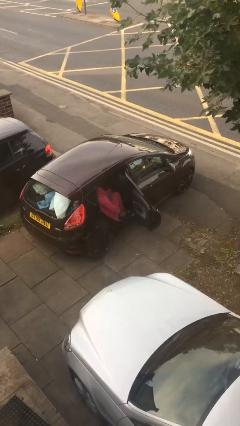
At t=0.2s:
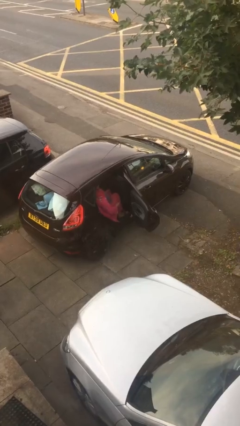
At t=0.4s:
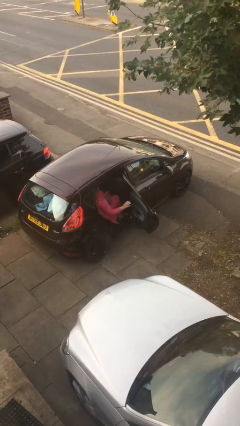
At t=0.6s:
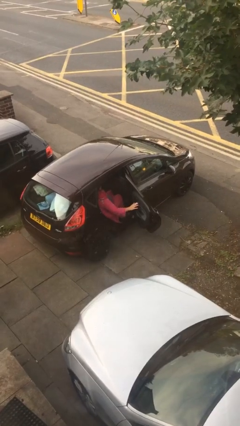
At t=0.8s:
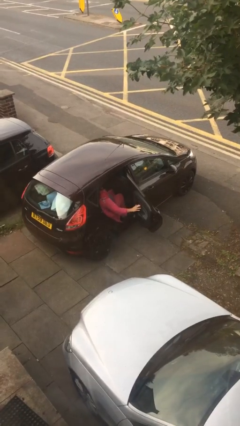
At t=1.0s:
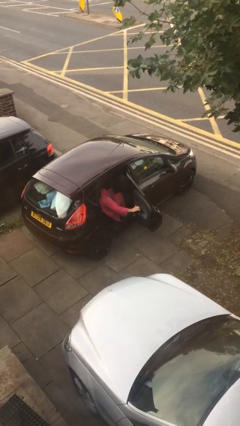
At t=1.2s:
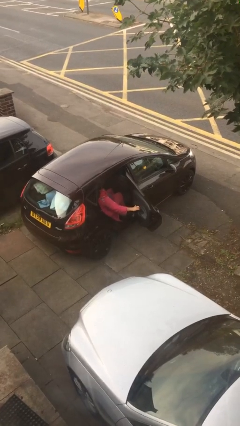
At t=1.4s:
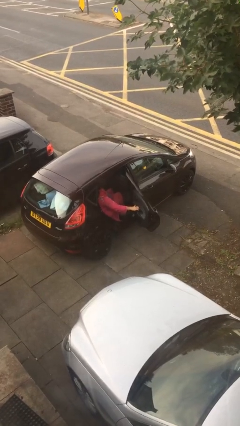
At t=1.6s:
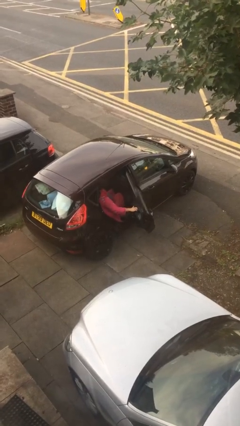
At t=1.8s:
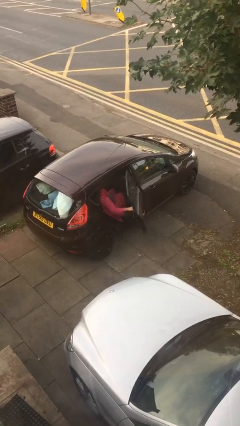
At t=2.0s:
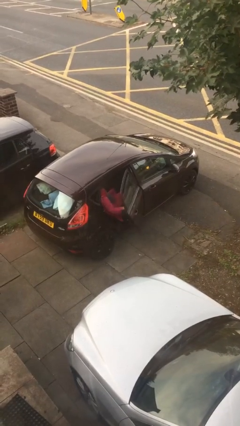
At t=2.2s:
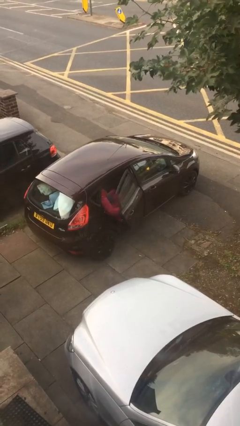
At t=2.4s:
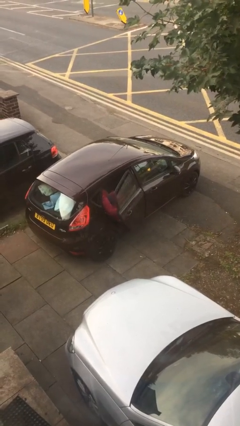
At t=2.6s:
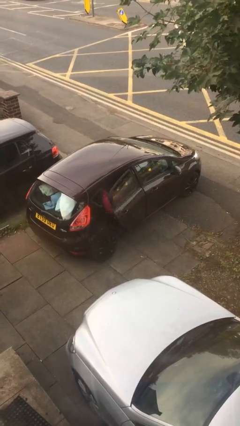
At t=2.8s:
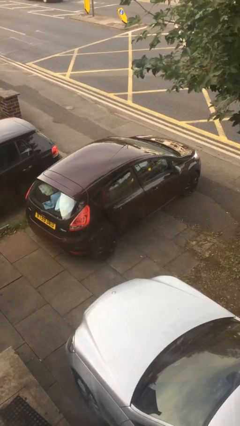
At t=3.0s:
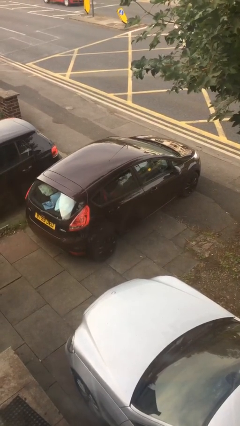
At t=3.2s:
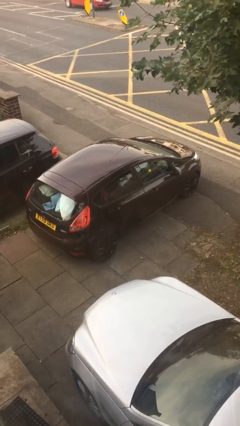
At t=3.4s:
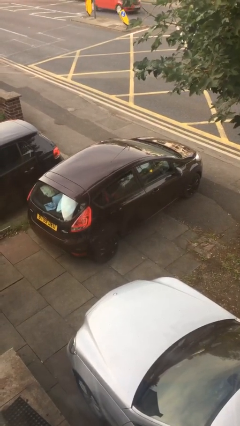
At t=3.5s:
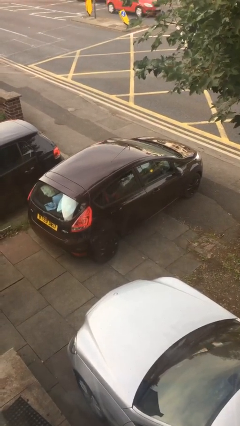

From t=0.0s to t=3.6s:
person closes car door

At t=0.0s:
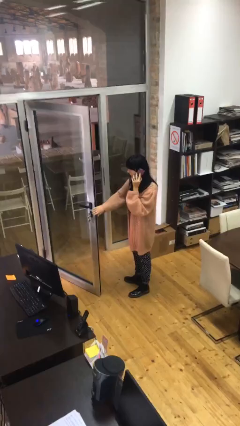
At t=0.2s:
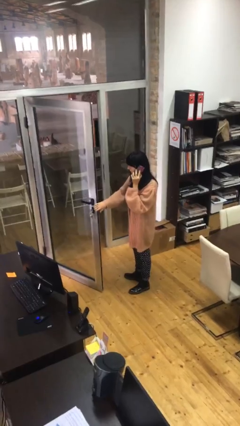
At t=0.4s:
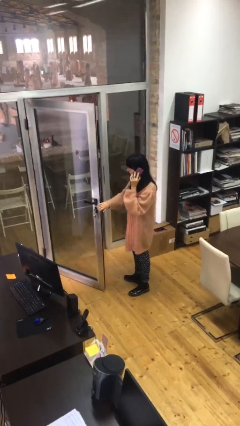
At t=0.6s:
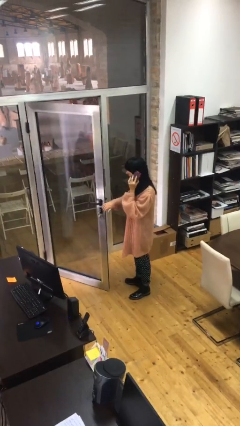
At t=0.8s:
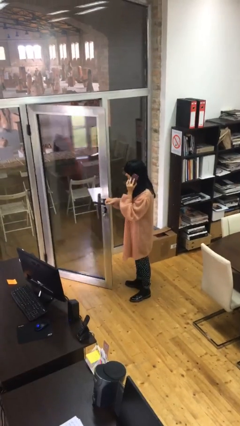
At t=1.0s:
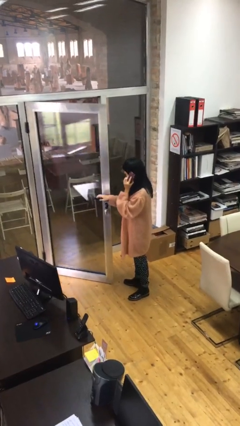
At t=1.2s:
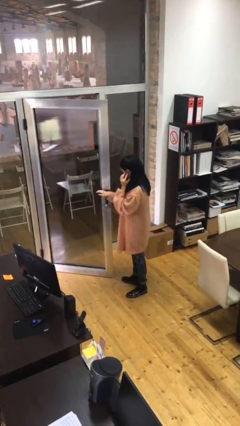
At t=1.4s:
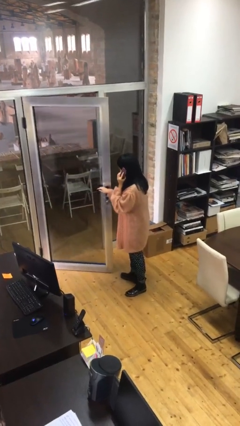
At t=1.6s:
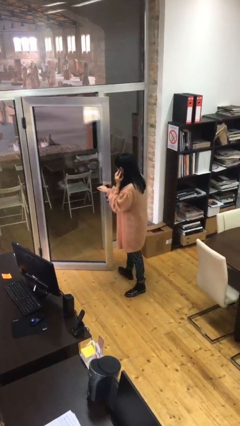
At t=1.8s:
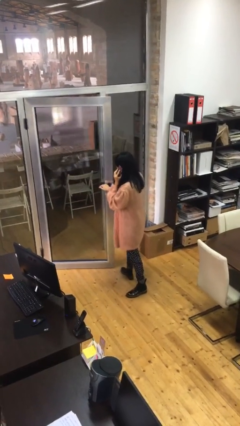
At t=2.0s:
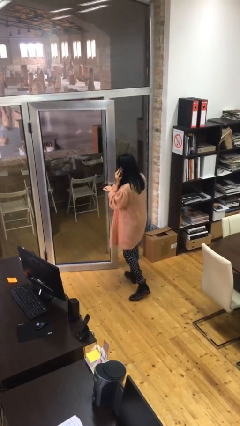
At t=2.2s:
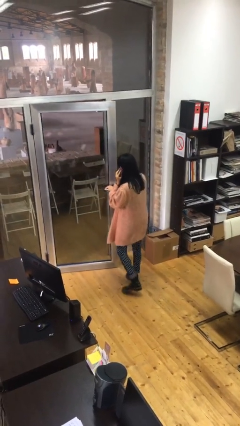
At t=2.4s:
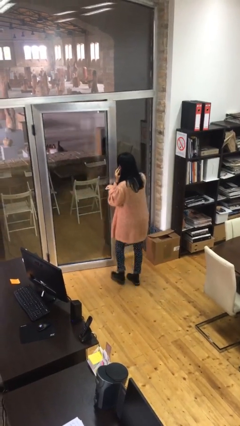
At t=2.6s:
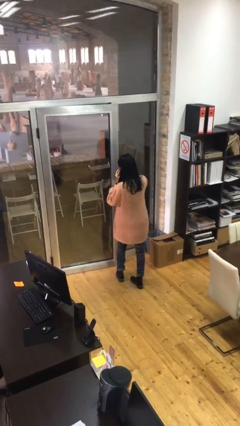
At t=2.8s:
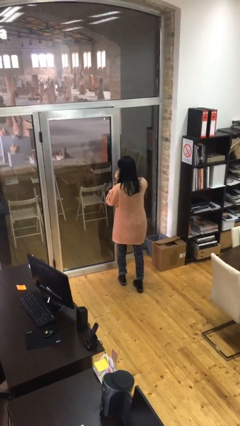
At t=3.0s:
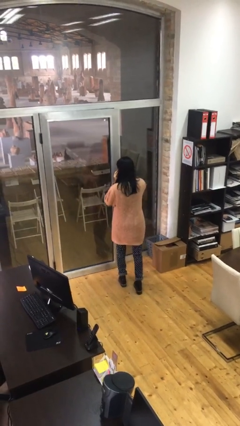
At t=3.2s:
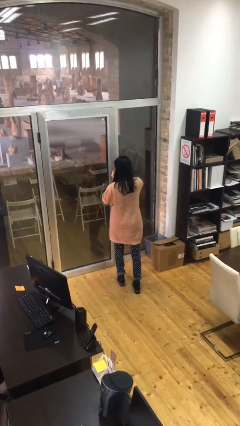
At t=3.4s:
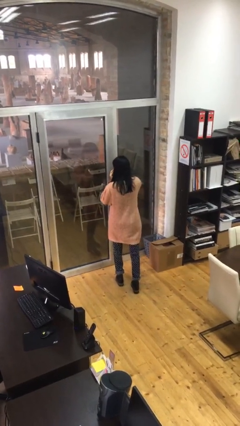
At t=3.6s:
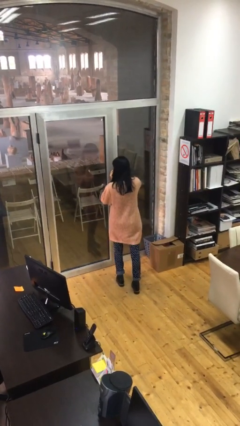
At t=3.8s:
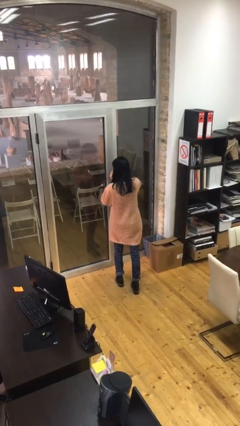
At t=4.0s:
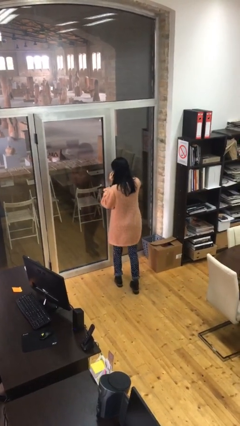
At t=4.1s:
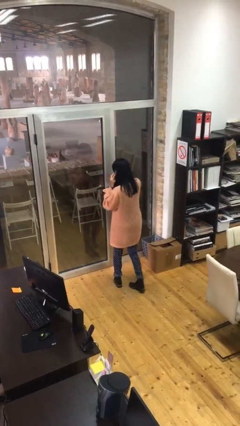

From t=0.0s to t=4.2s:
person closes facility door

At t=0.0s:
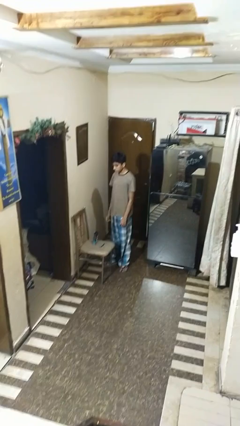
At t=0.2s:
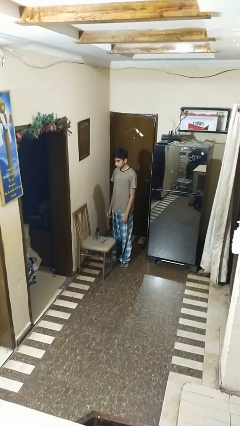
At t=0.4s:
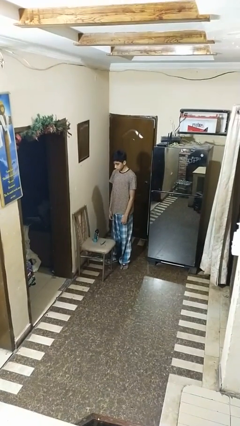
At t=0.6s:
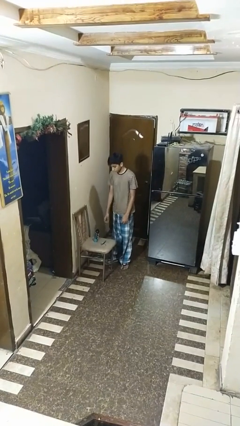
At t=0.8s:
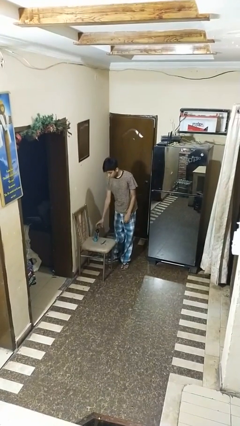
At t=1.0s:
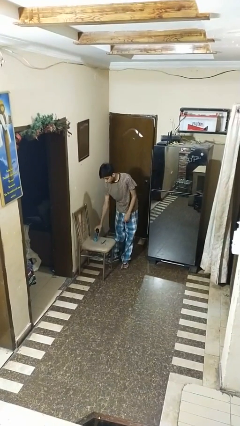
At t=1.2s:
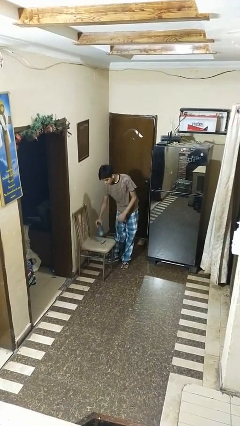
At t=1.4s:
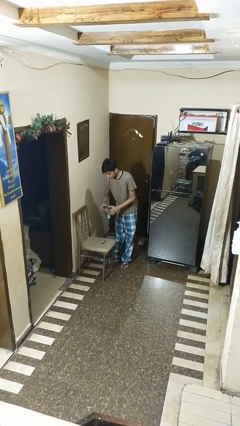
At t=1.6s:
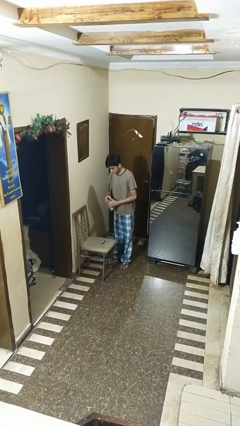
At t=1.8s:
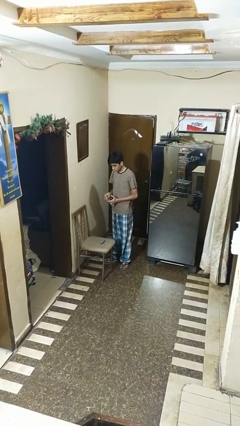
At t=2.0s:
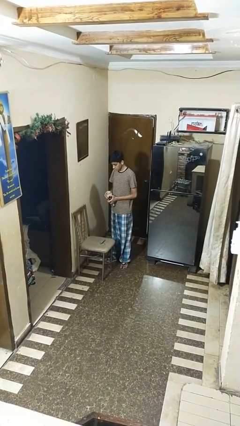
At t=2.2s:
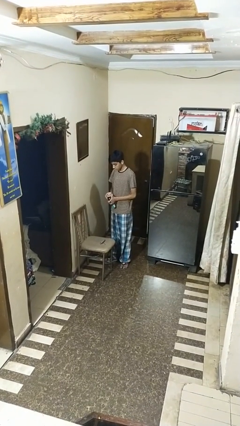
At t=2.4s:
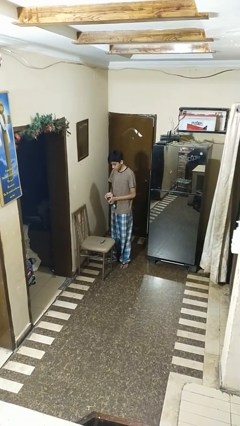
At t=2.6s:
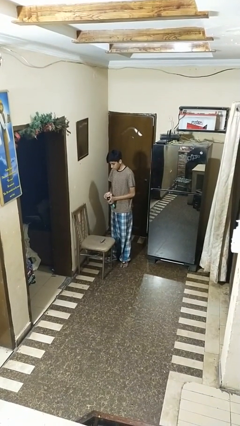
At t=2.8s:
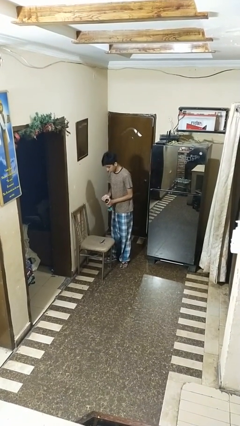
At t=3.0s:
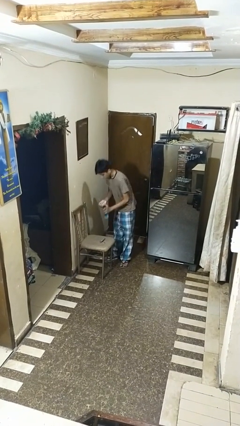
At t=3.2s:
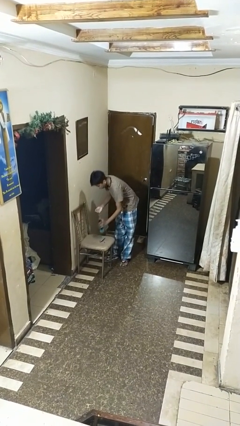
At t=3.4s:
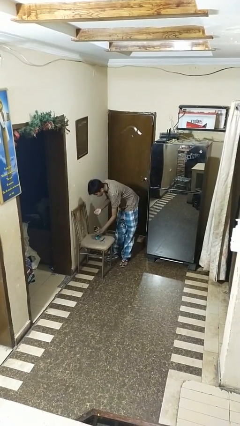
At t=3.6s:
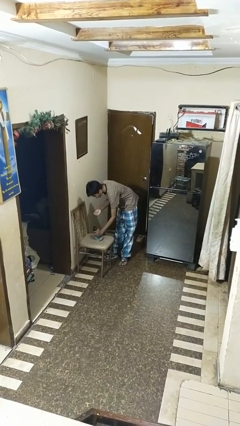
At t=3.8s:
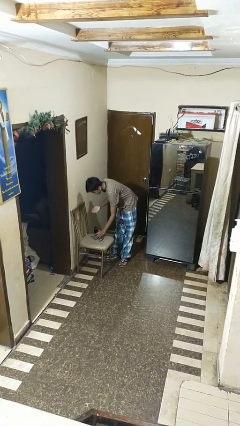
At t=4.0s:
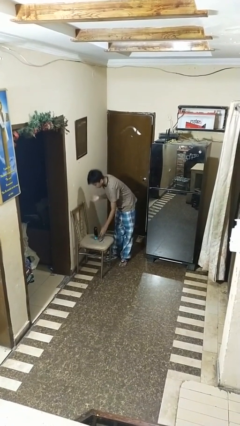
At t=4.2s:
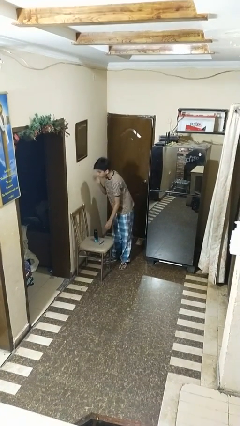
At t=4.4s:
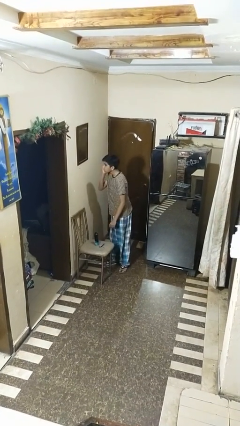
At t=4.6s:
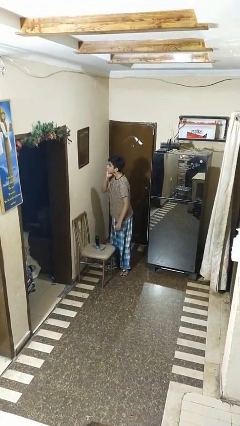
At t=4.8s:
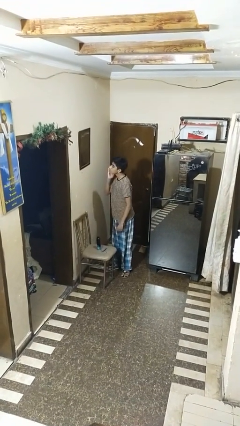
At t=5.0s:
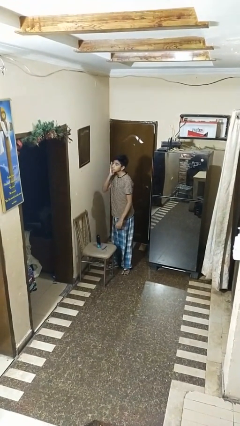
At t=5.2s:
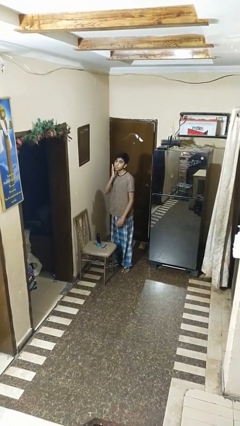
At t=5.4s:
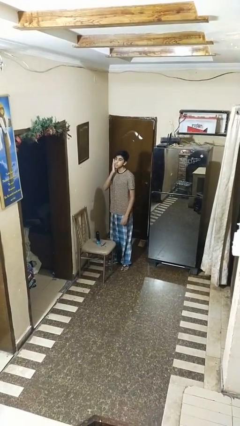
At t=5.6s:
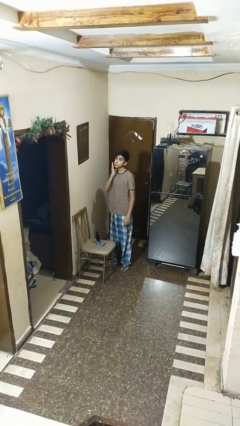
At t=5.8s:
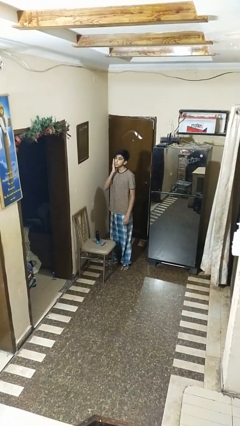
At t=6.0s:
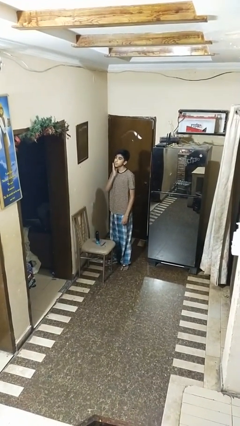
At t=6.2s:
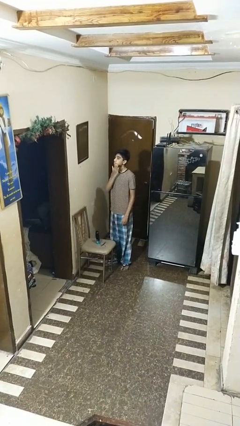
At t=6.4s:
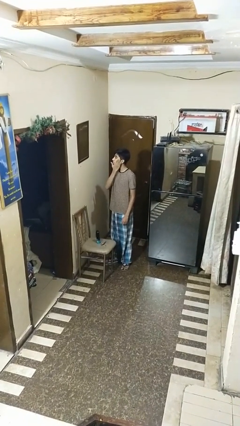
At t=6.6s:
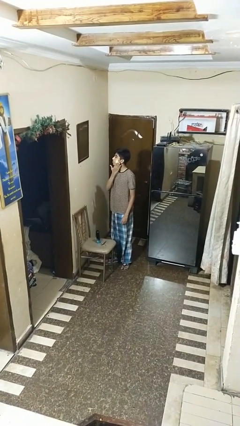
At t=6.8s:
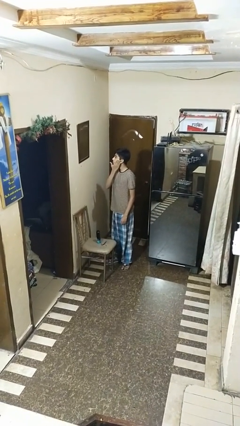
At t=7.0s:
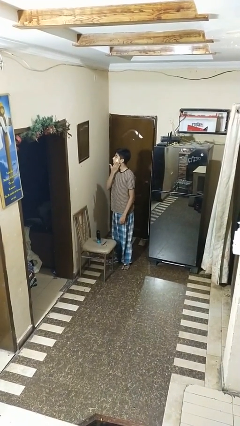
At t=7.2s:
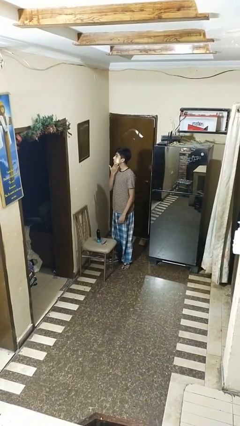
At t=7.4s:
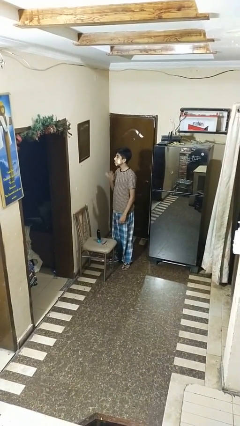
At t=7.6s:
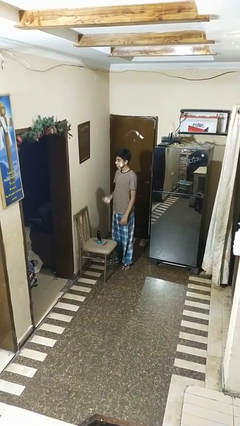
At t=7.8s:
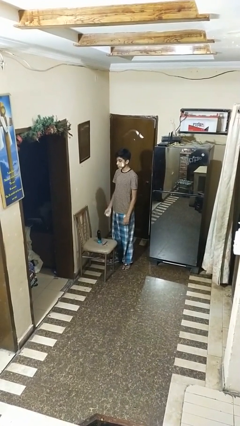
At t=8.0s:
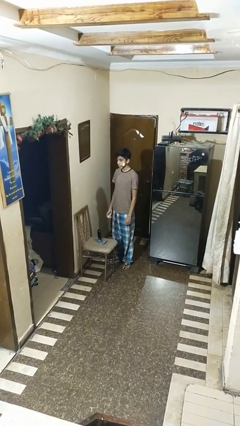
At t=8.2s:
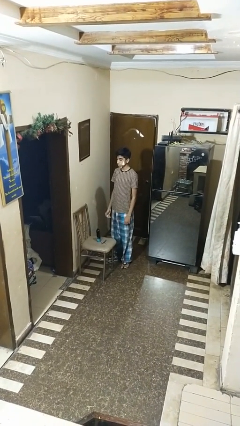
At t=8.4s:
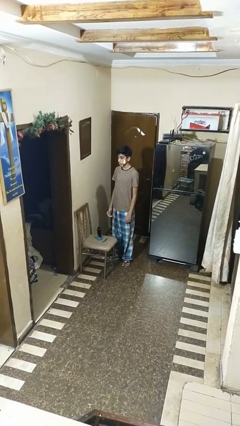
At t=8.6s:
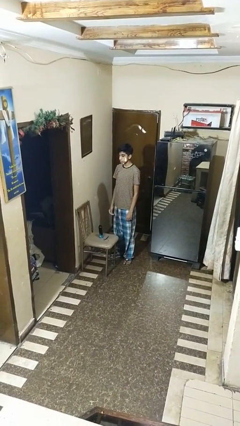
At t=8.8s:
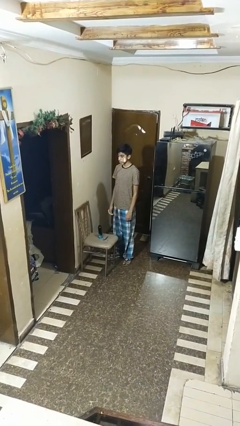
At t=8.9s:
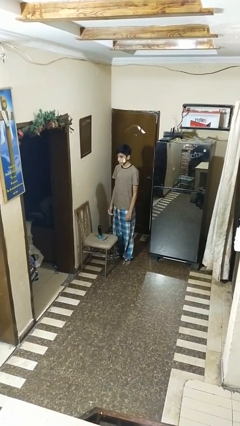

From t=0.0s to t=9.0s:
person applies shaving cream

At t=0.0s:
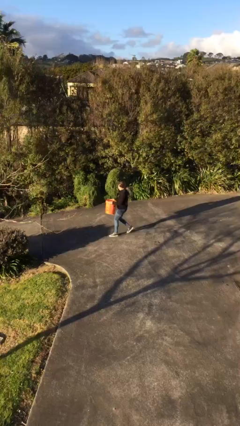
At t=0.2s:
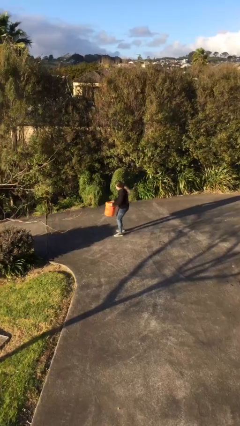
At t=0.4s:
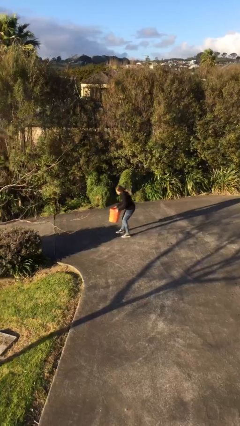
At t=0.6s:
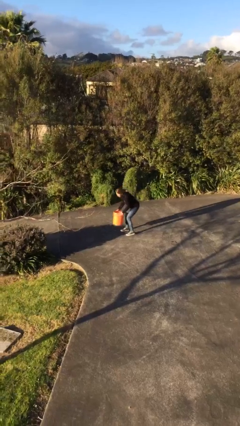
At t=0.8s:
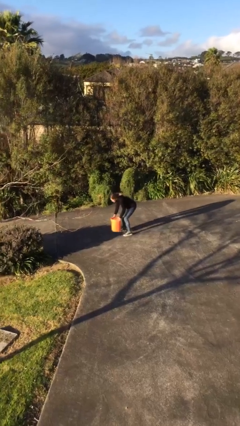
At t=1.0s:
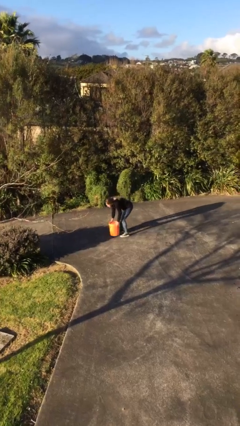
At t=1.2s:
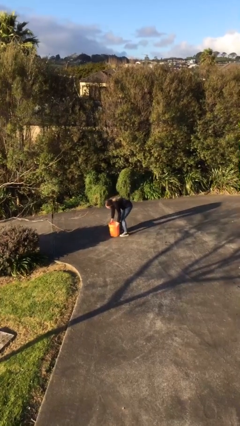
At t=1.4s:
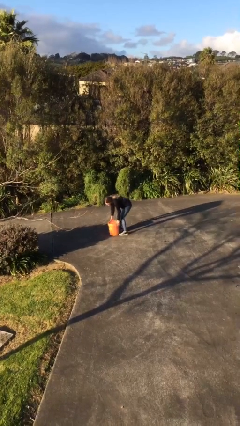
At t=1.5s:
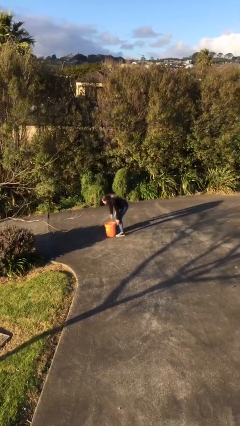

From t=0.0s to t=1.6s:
person puts down object on floor
